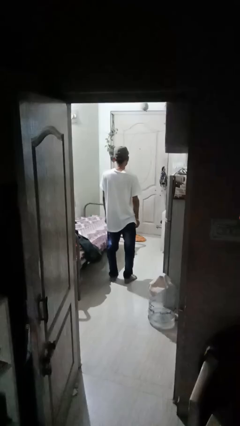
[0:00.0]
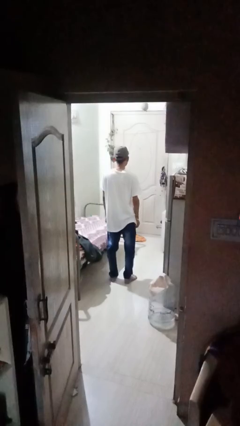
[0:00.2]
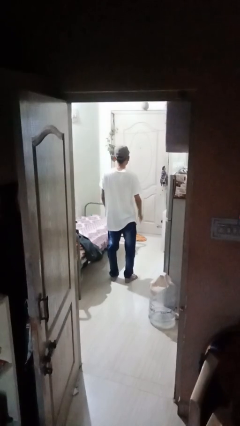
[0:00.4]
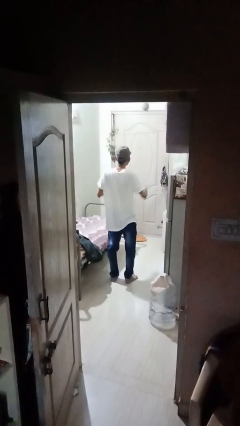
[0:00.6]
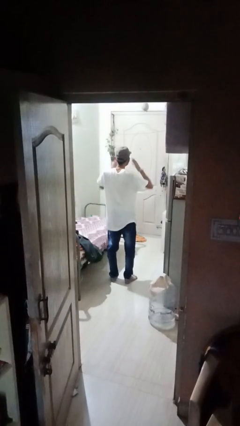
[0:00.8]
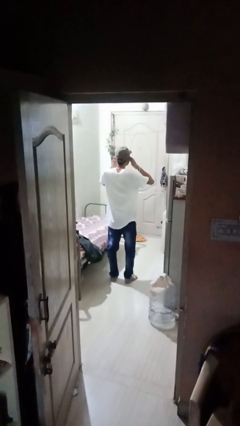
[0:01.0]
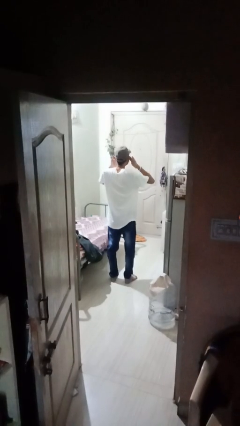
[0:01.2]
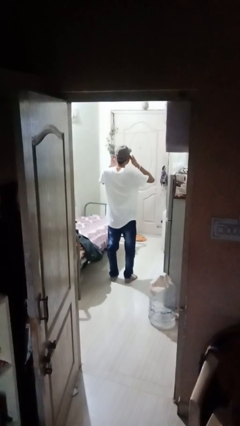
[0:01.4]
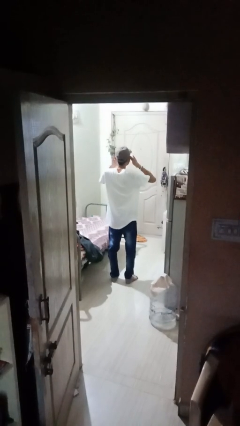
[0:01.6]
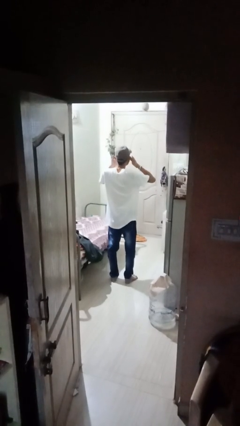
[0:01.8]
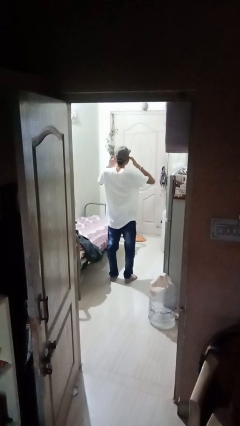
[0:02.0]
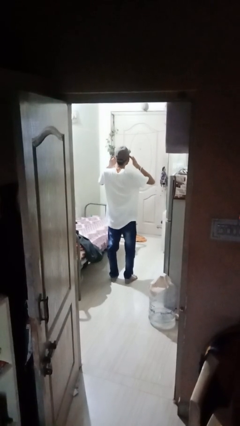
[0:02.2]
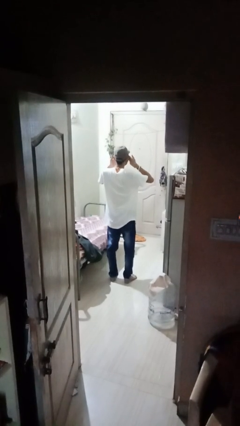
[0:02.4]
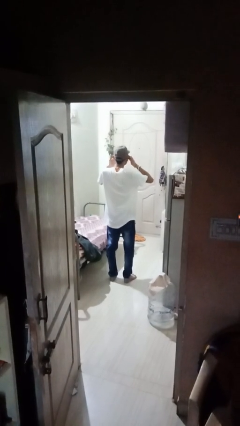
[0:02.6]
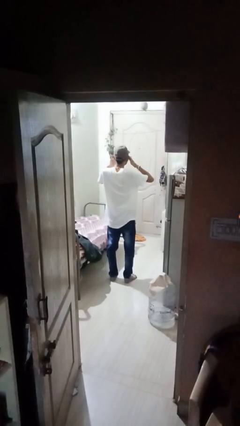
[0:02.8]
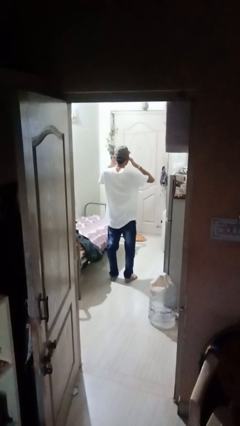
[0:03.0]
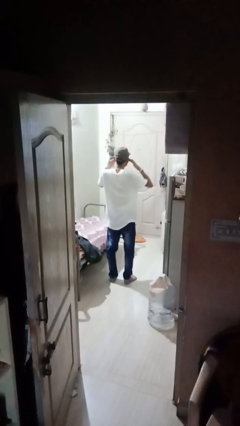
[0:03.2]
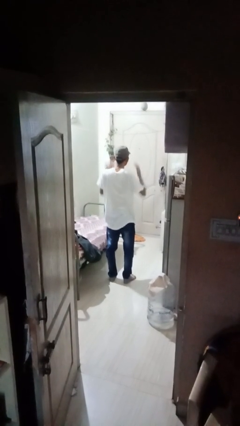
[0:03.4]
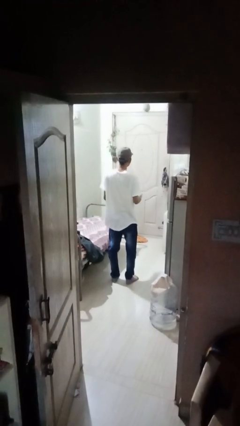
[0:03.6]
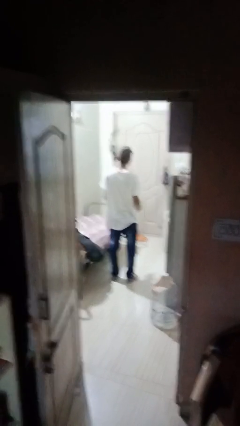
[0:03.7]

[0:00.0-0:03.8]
person rubs eyes

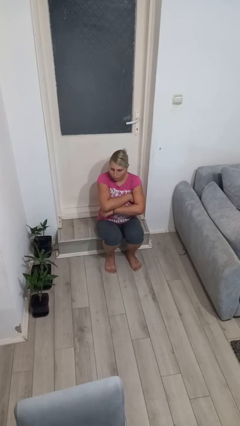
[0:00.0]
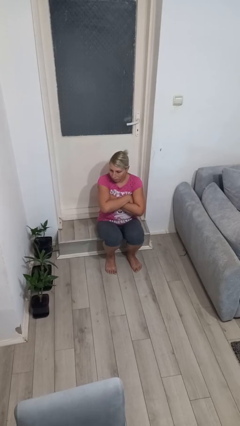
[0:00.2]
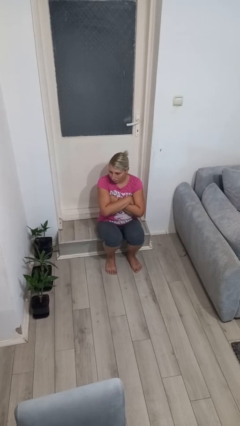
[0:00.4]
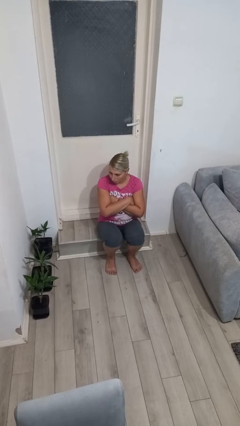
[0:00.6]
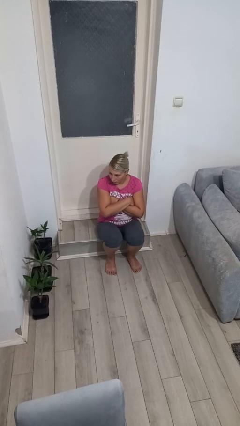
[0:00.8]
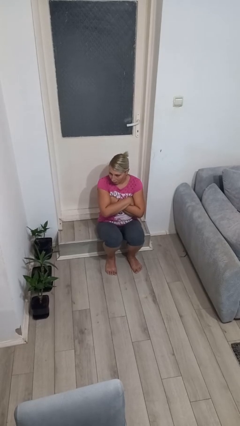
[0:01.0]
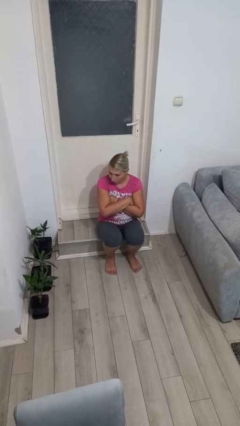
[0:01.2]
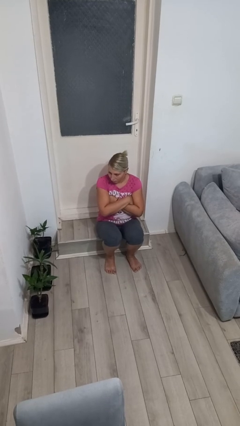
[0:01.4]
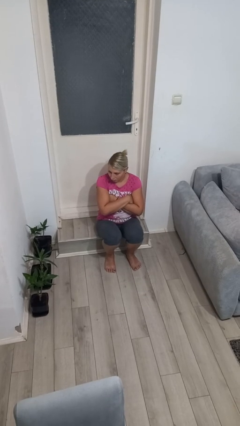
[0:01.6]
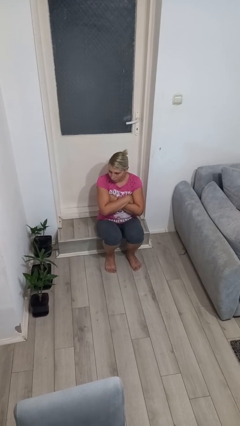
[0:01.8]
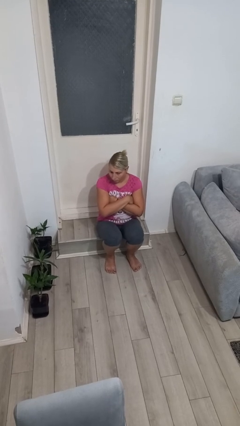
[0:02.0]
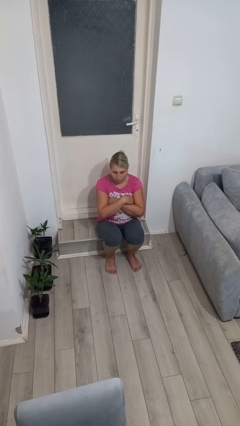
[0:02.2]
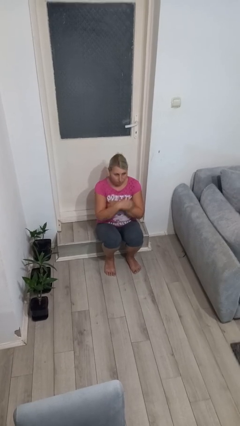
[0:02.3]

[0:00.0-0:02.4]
person crosses arms

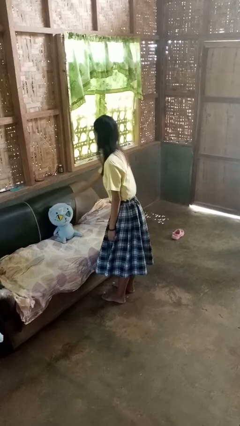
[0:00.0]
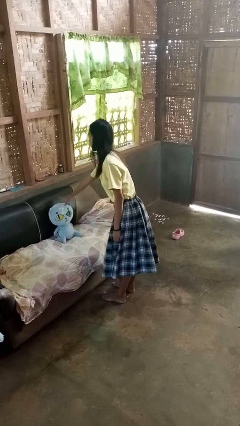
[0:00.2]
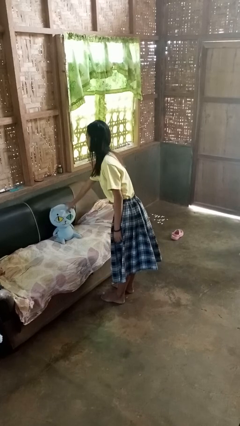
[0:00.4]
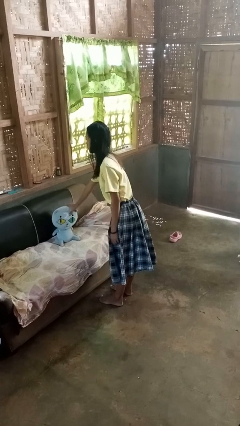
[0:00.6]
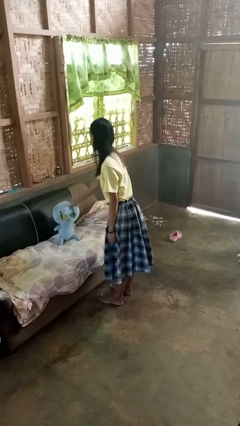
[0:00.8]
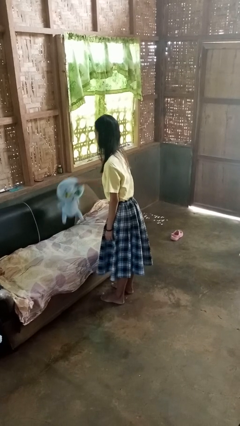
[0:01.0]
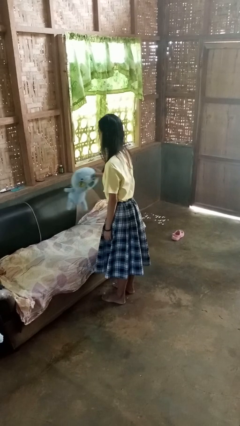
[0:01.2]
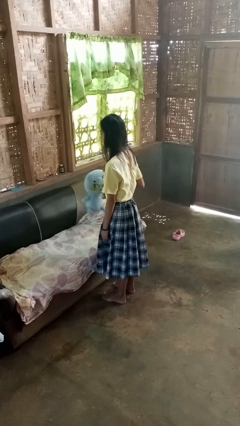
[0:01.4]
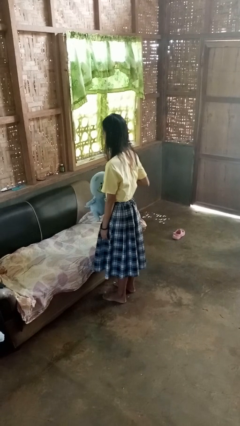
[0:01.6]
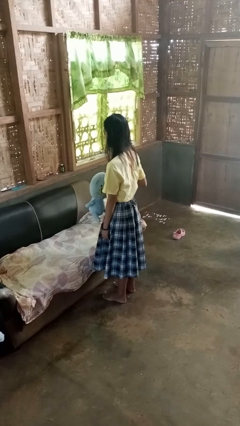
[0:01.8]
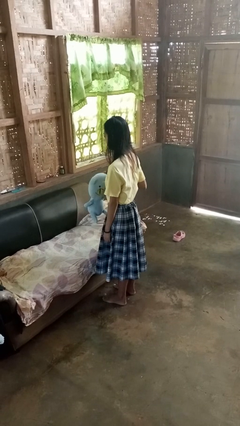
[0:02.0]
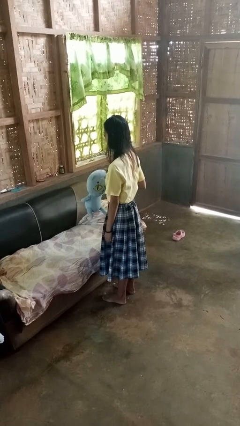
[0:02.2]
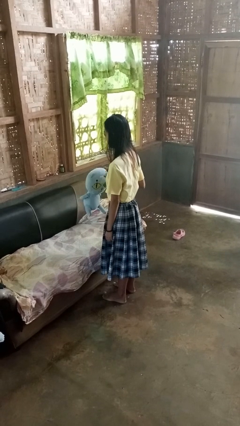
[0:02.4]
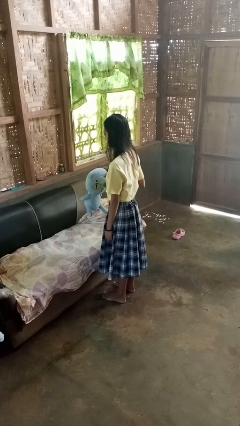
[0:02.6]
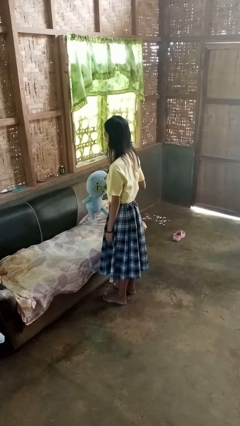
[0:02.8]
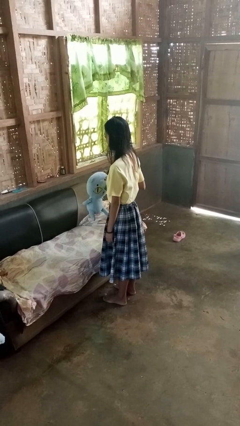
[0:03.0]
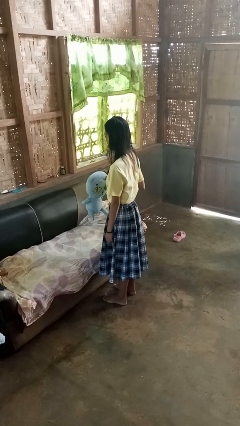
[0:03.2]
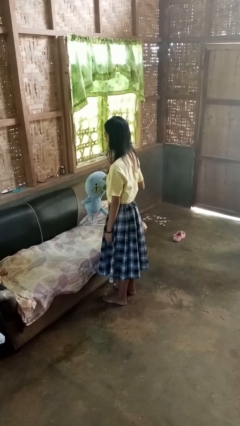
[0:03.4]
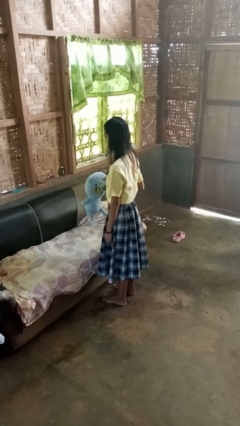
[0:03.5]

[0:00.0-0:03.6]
person picks up object from couch

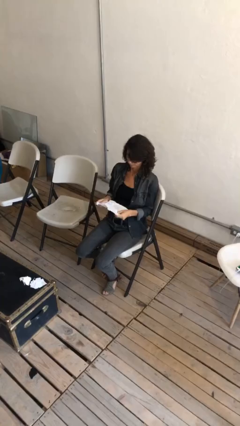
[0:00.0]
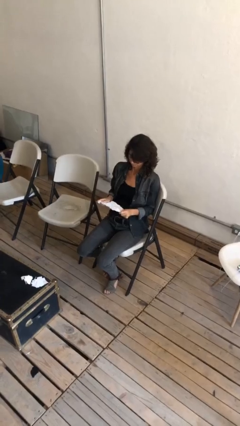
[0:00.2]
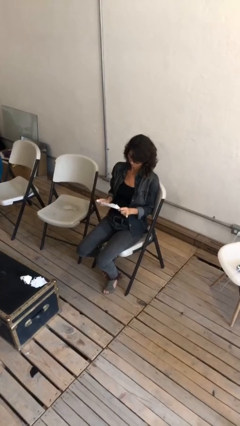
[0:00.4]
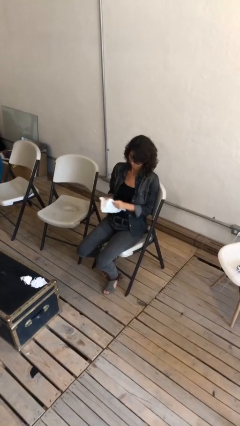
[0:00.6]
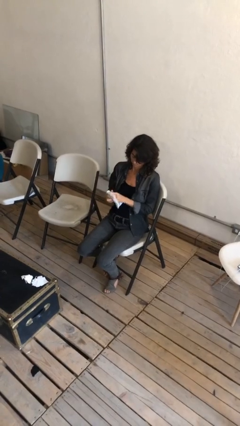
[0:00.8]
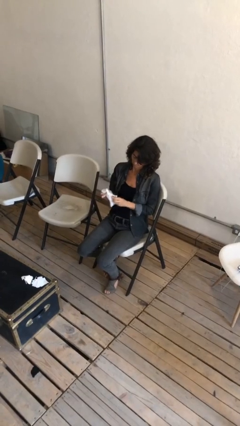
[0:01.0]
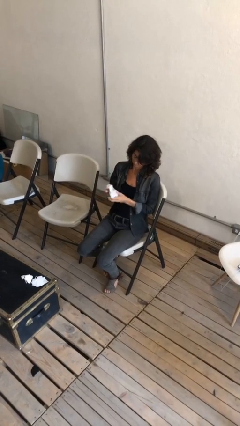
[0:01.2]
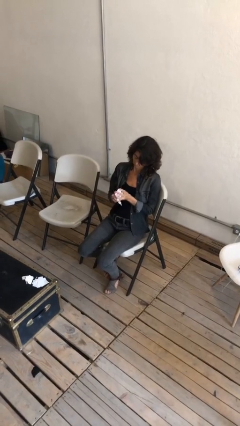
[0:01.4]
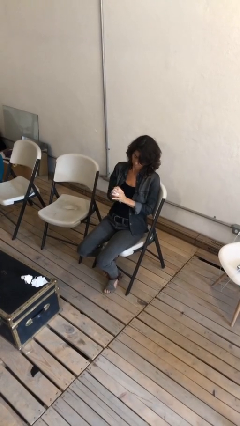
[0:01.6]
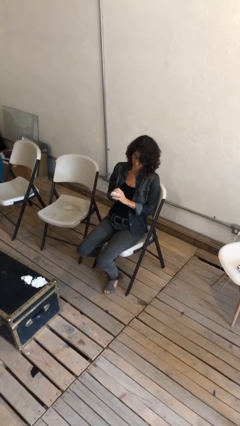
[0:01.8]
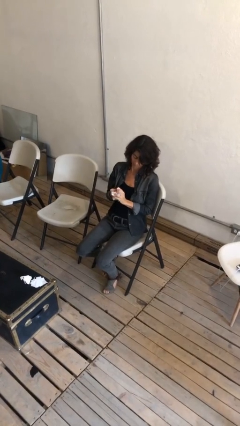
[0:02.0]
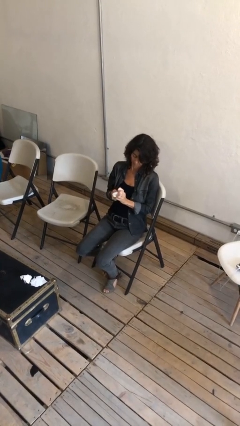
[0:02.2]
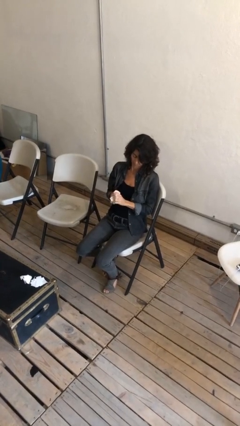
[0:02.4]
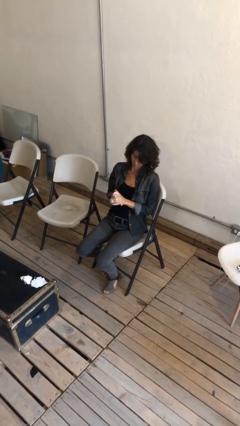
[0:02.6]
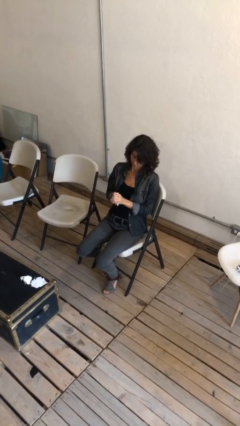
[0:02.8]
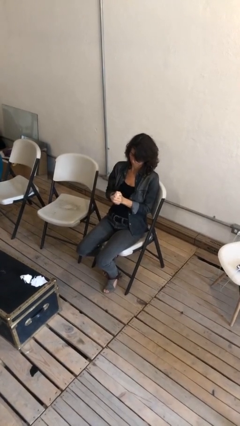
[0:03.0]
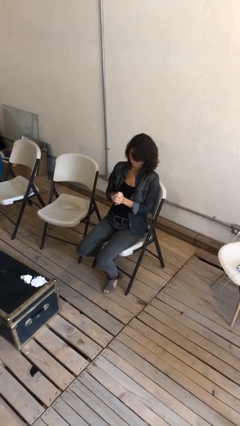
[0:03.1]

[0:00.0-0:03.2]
person crumples paper

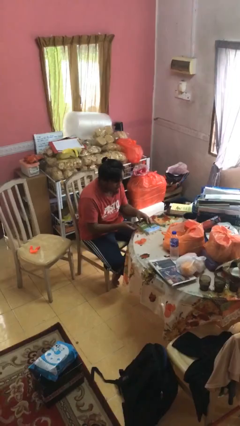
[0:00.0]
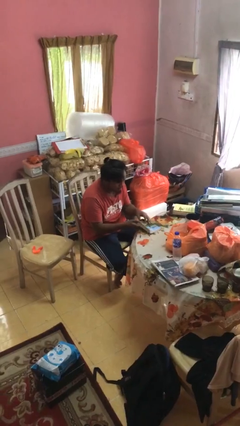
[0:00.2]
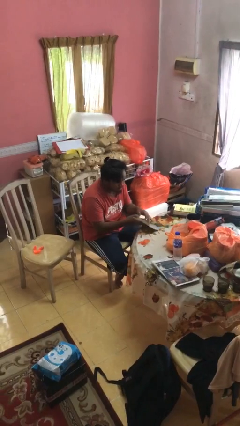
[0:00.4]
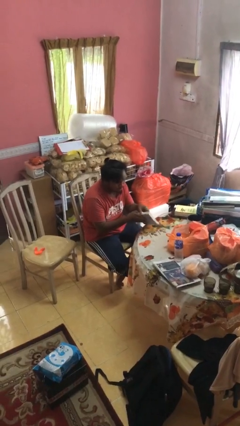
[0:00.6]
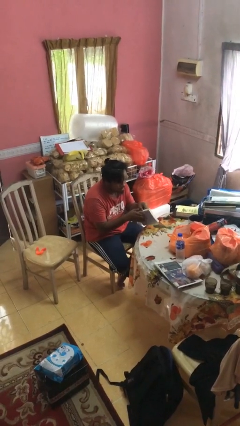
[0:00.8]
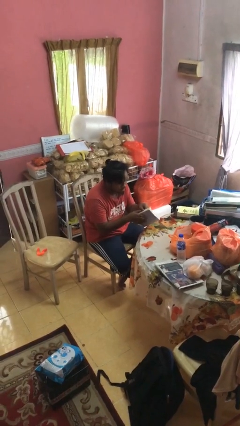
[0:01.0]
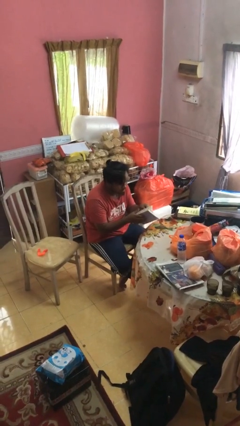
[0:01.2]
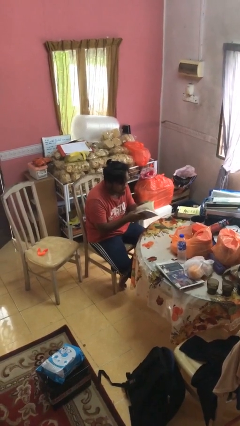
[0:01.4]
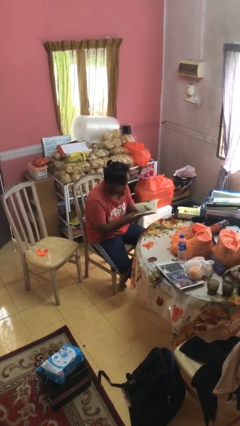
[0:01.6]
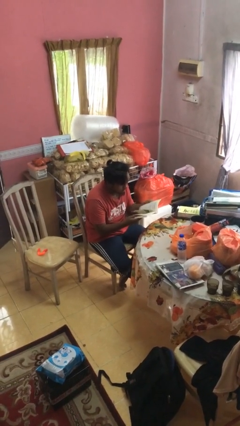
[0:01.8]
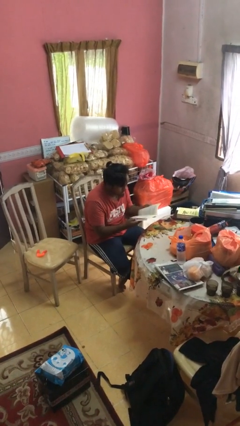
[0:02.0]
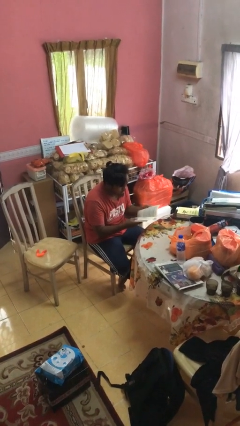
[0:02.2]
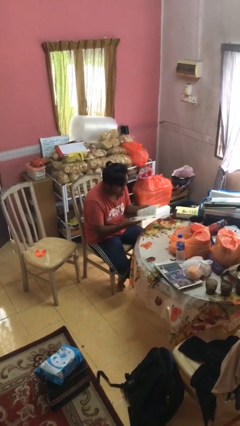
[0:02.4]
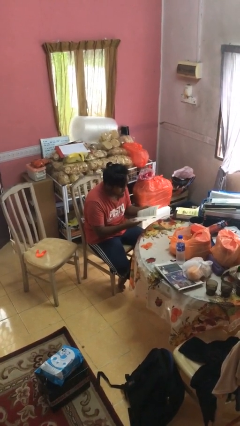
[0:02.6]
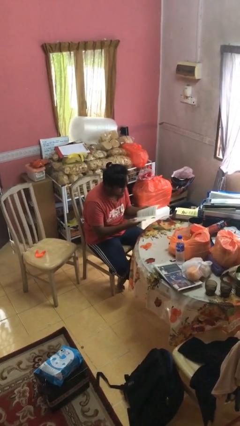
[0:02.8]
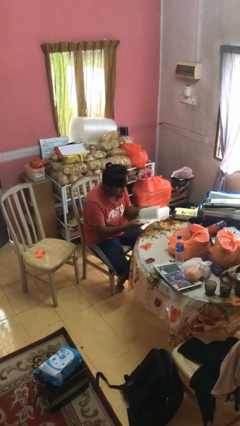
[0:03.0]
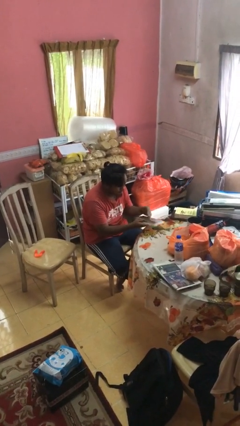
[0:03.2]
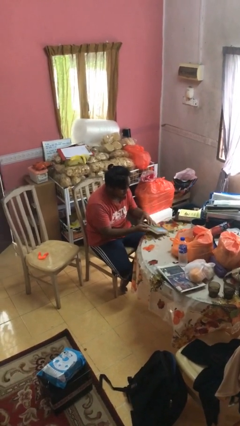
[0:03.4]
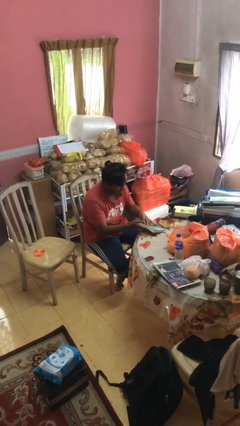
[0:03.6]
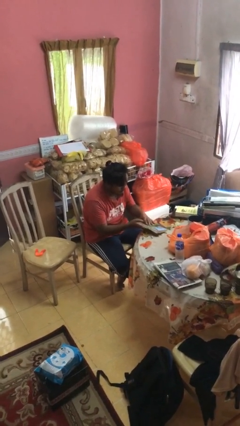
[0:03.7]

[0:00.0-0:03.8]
person reads book

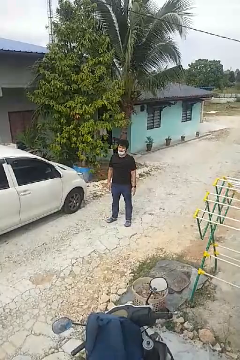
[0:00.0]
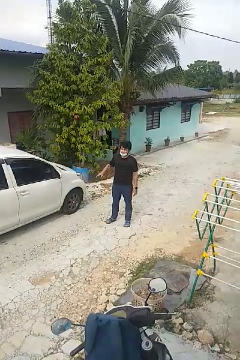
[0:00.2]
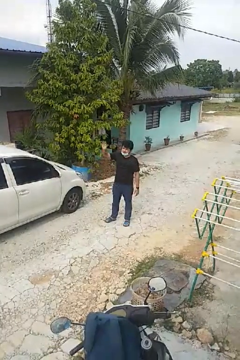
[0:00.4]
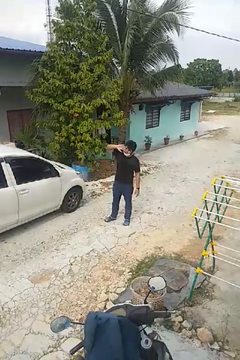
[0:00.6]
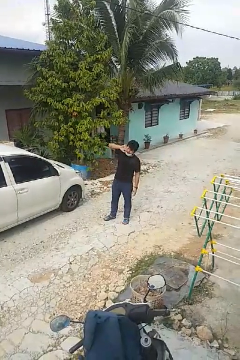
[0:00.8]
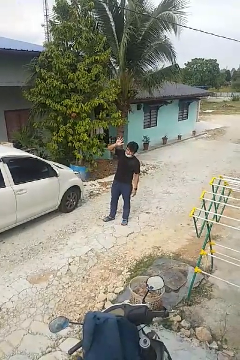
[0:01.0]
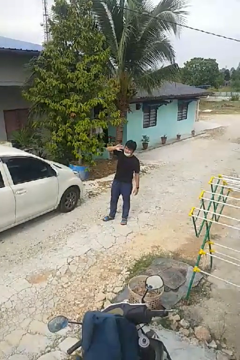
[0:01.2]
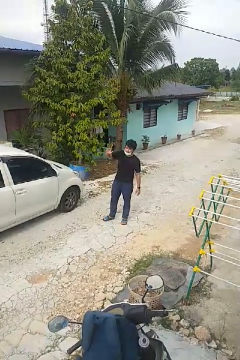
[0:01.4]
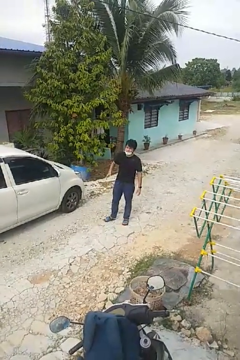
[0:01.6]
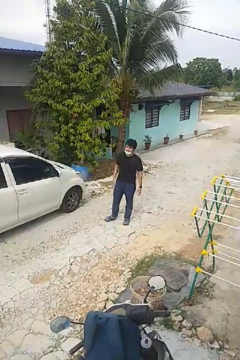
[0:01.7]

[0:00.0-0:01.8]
person waves at person
